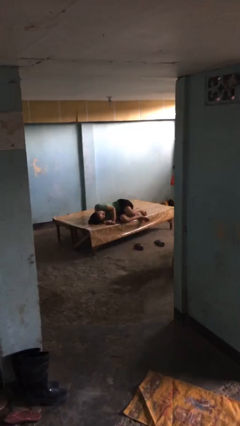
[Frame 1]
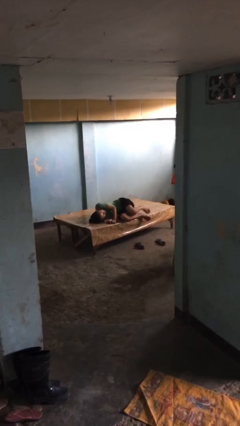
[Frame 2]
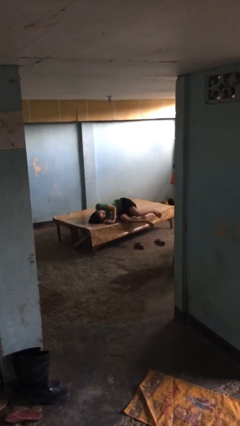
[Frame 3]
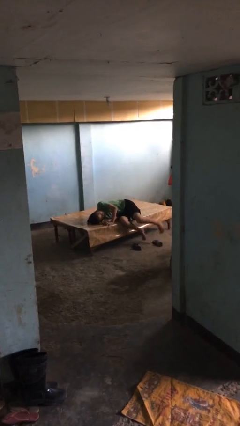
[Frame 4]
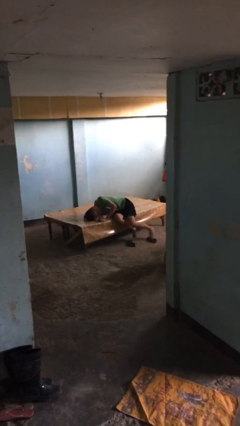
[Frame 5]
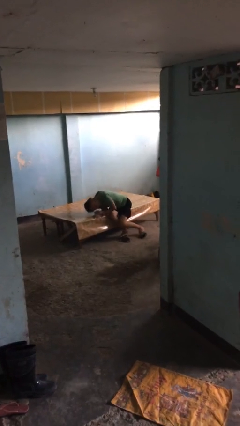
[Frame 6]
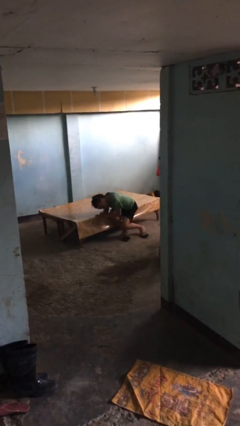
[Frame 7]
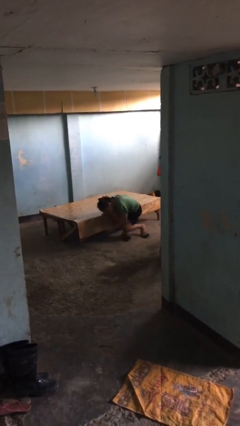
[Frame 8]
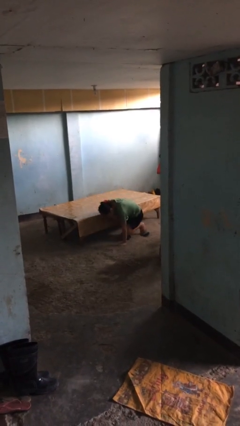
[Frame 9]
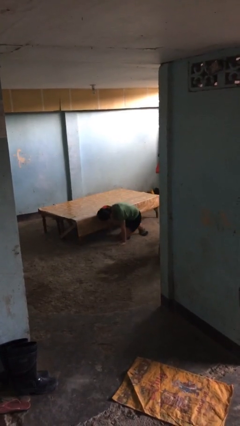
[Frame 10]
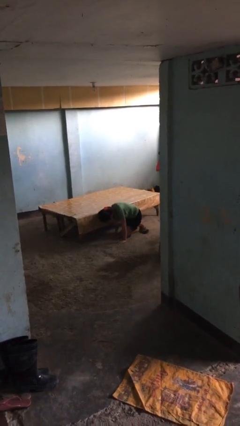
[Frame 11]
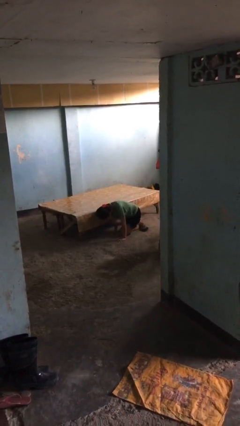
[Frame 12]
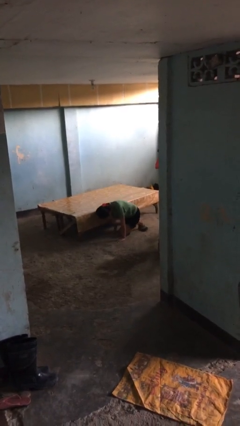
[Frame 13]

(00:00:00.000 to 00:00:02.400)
person falls from bed

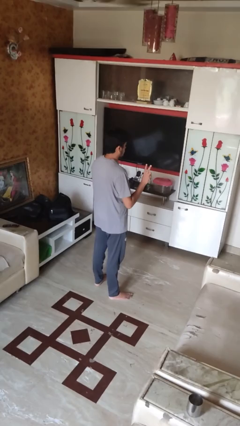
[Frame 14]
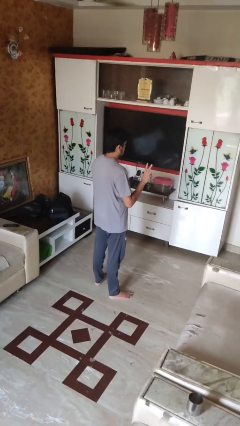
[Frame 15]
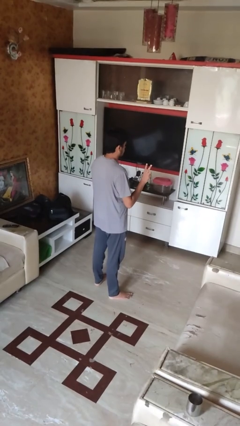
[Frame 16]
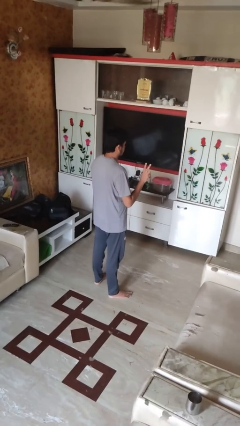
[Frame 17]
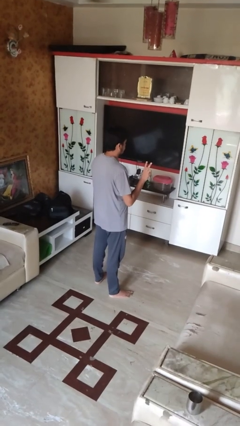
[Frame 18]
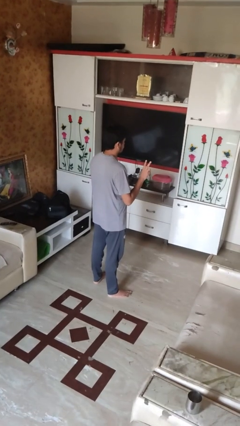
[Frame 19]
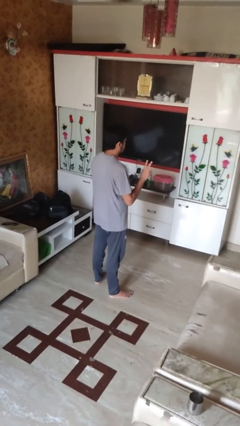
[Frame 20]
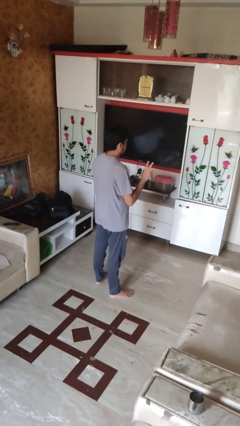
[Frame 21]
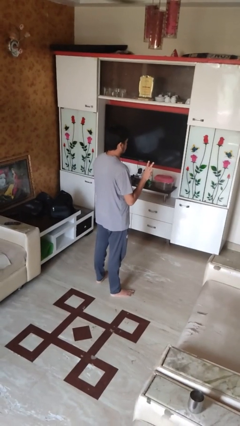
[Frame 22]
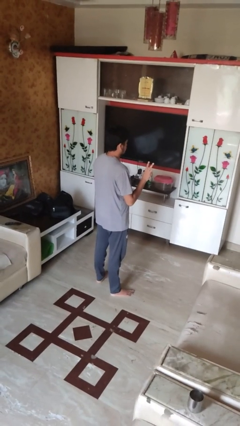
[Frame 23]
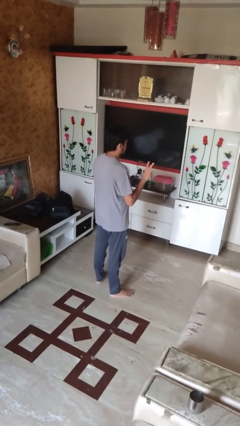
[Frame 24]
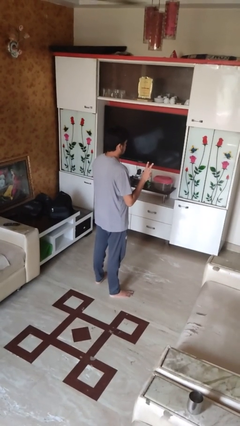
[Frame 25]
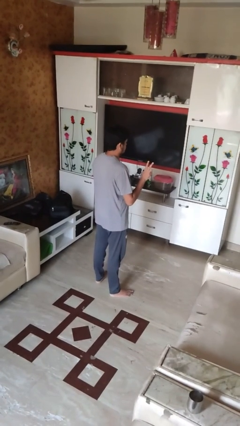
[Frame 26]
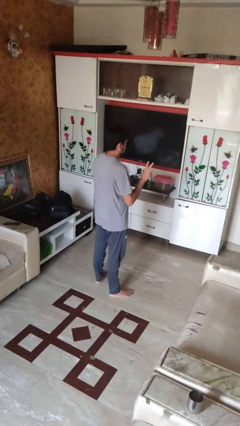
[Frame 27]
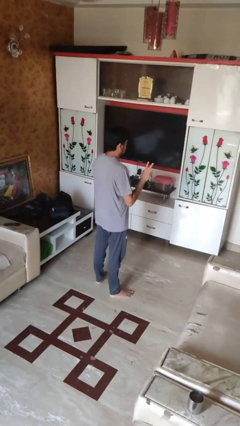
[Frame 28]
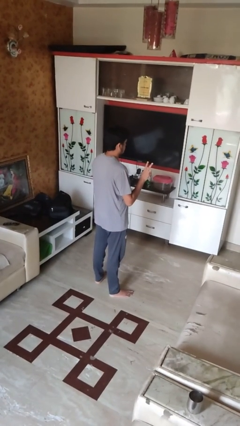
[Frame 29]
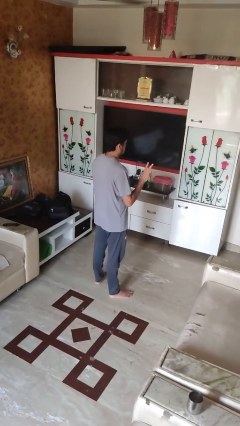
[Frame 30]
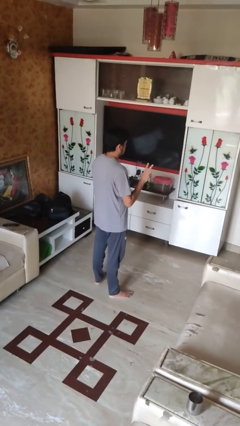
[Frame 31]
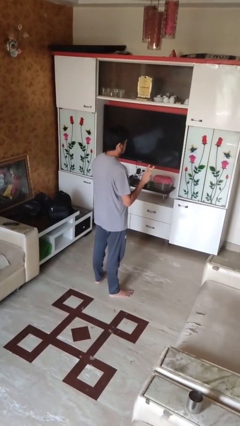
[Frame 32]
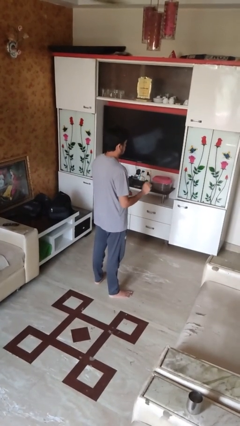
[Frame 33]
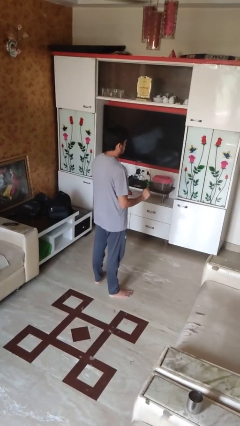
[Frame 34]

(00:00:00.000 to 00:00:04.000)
person gestures peace

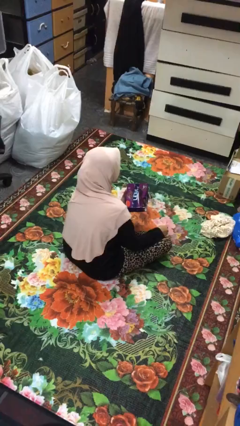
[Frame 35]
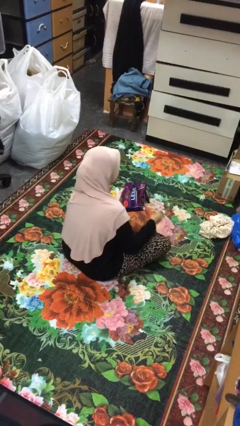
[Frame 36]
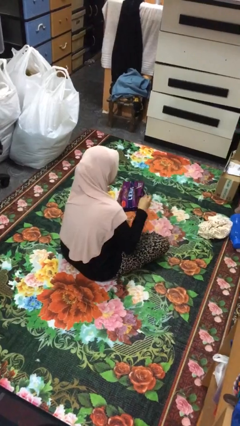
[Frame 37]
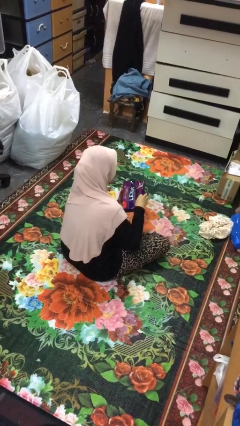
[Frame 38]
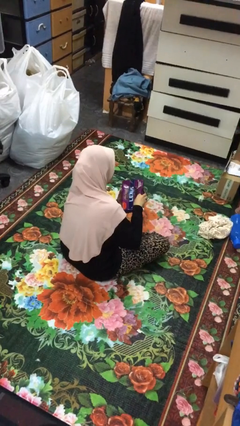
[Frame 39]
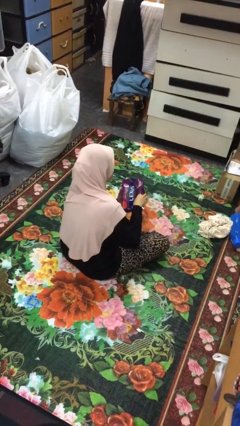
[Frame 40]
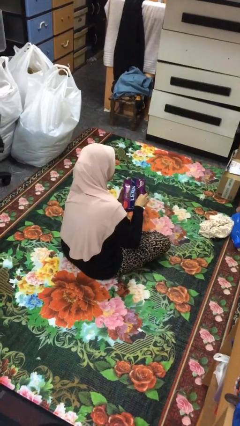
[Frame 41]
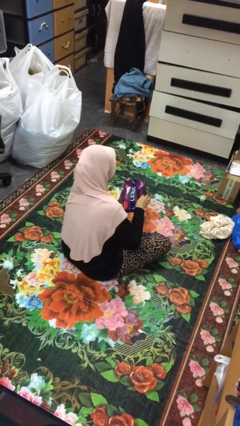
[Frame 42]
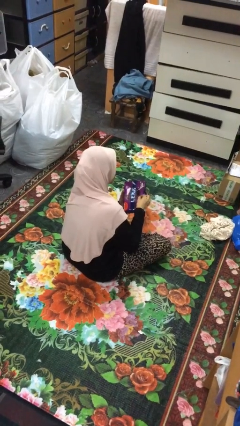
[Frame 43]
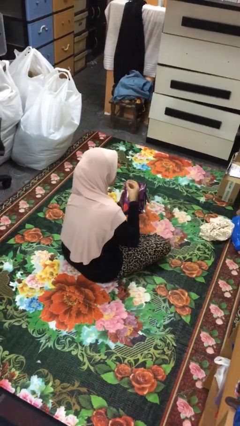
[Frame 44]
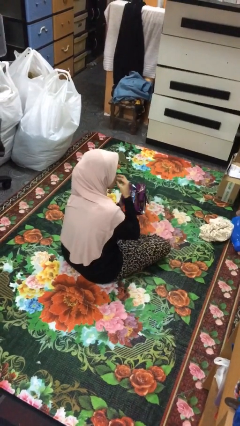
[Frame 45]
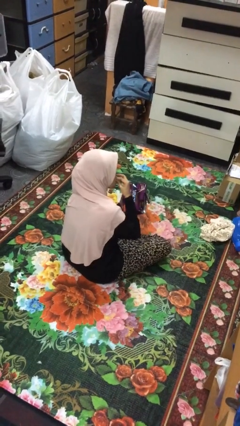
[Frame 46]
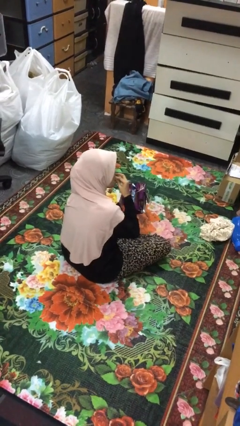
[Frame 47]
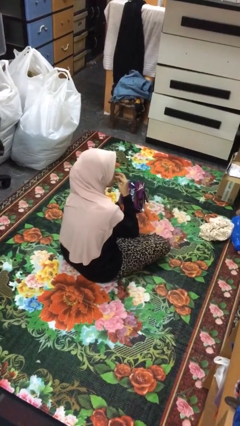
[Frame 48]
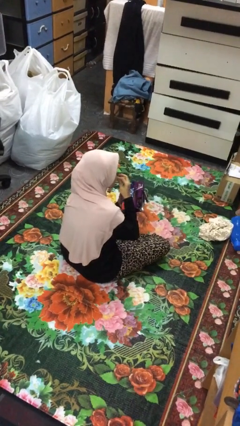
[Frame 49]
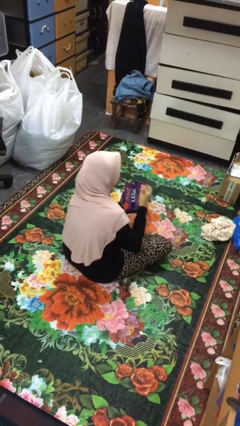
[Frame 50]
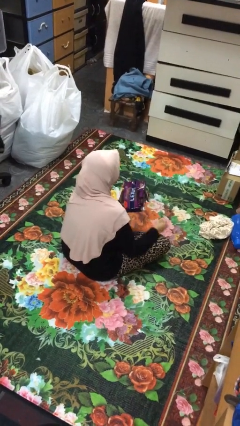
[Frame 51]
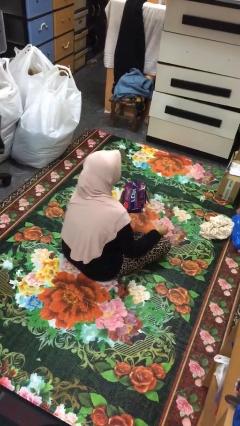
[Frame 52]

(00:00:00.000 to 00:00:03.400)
person eats snack from bag

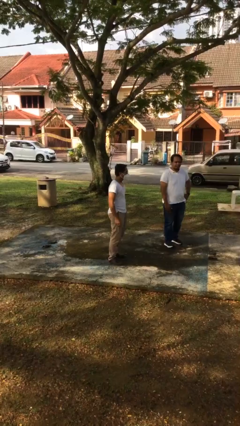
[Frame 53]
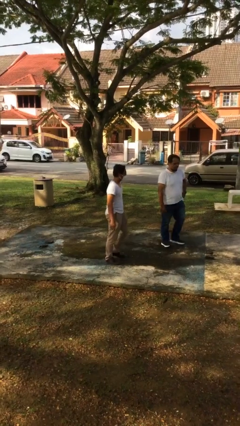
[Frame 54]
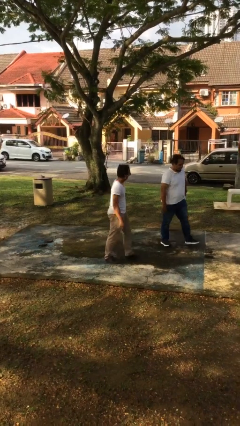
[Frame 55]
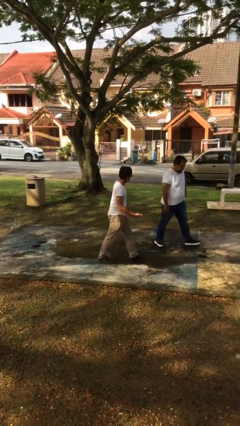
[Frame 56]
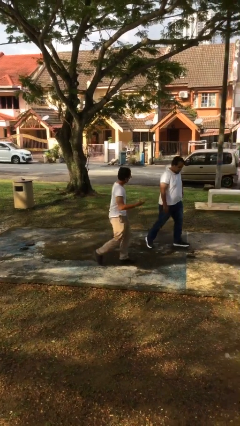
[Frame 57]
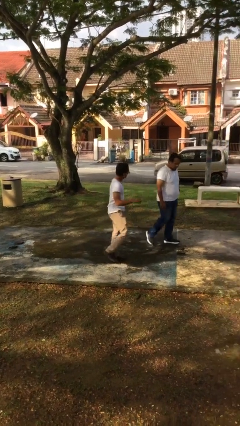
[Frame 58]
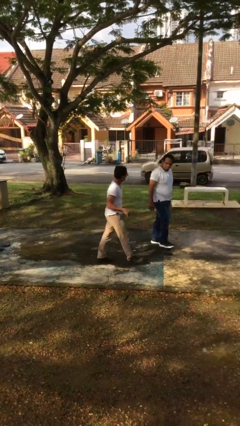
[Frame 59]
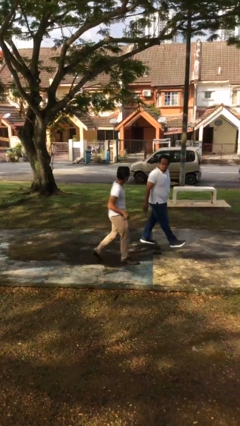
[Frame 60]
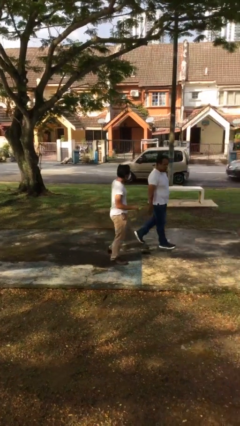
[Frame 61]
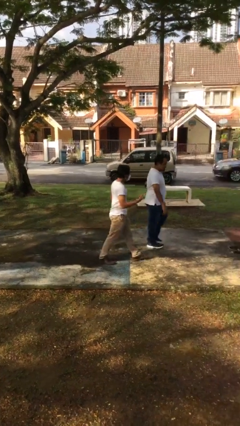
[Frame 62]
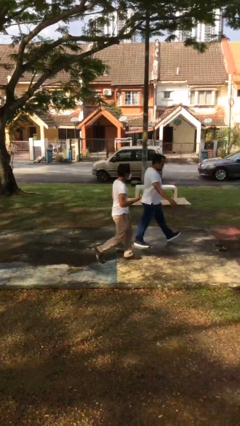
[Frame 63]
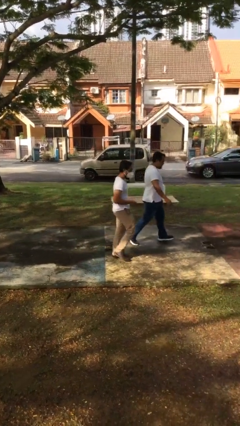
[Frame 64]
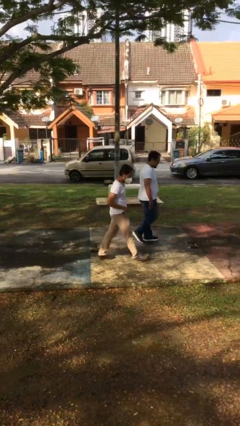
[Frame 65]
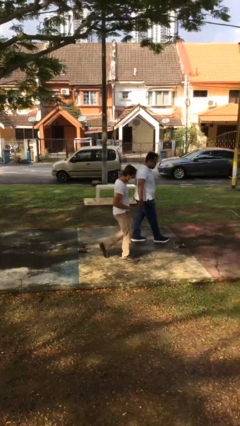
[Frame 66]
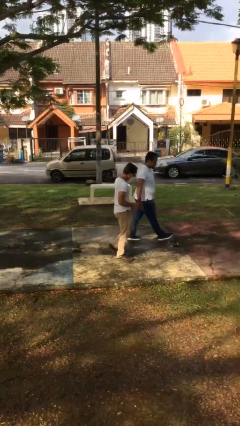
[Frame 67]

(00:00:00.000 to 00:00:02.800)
person talks to person

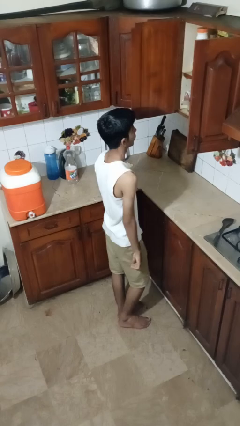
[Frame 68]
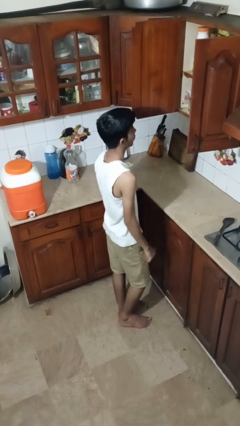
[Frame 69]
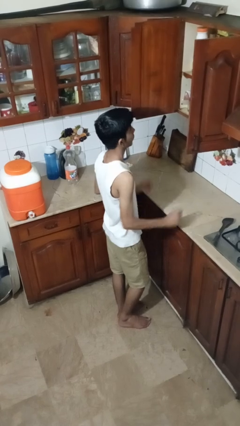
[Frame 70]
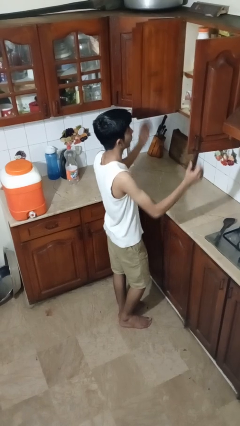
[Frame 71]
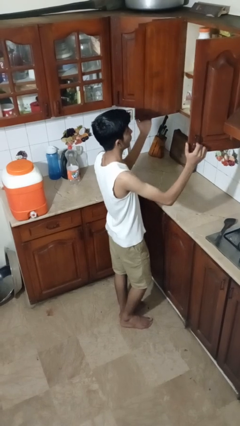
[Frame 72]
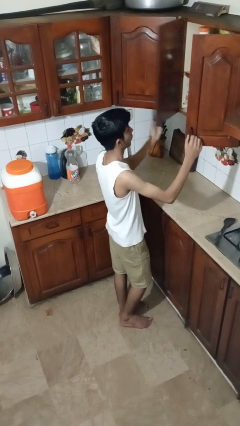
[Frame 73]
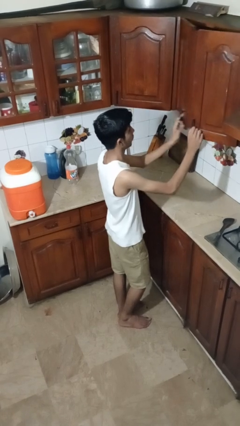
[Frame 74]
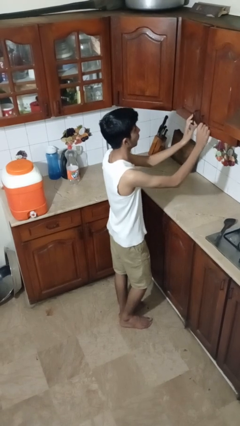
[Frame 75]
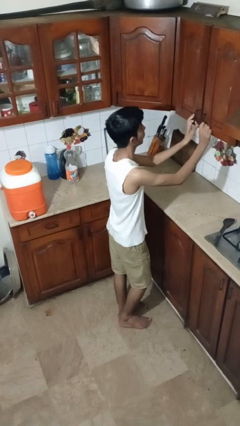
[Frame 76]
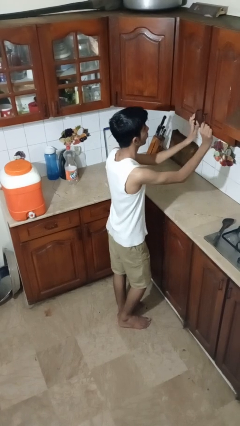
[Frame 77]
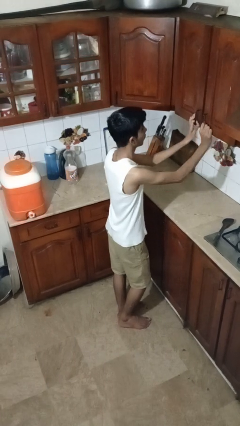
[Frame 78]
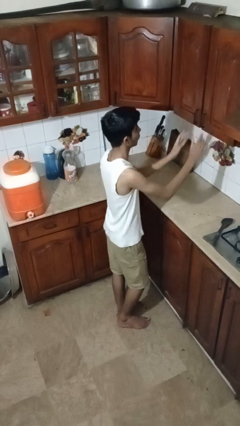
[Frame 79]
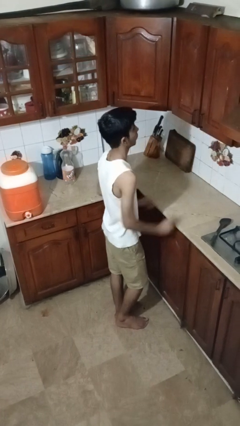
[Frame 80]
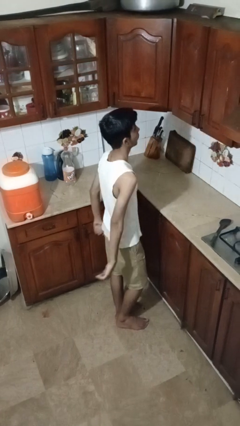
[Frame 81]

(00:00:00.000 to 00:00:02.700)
person closes cabinet

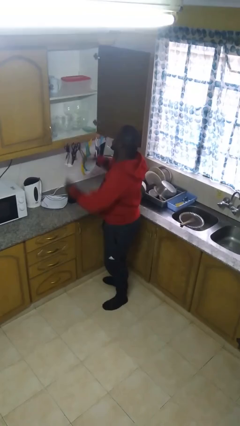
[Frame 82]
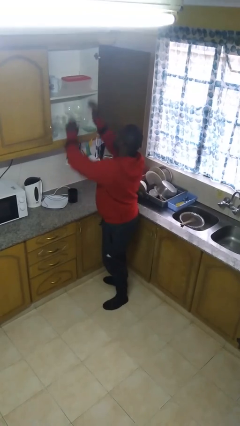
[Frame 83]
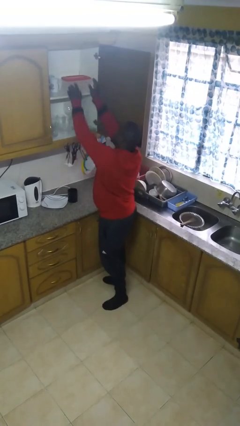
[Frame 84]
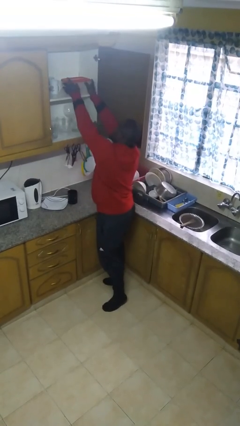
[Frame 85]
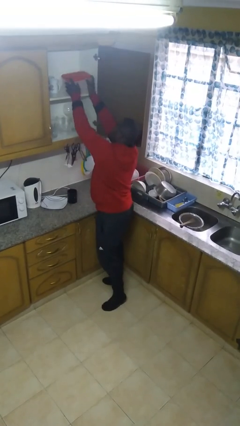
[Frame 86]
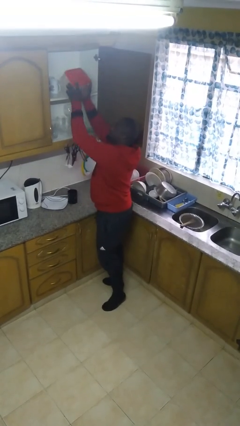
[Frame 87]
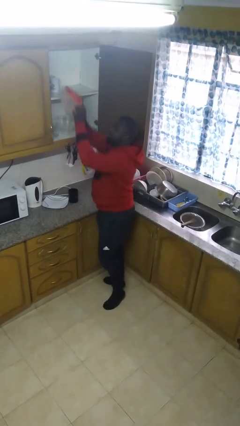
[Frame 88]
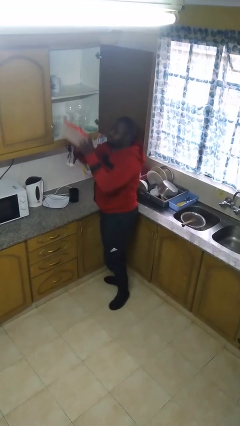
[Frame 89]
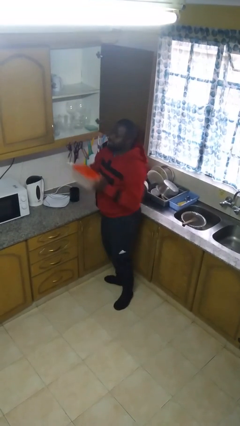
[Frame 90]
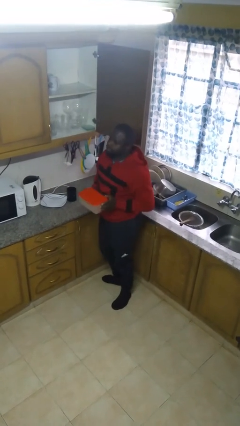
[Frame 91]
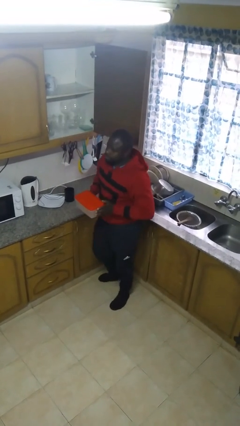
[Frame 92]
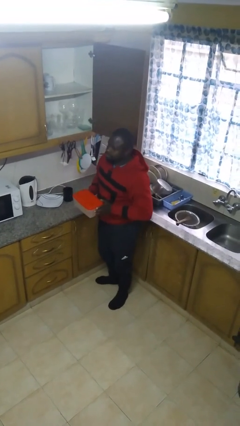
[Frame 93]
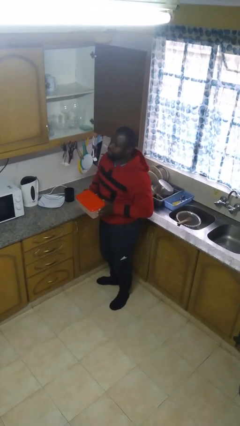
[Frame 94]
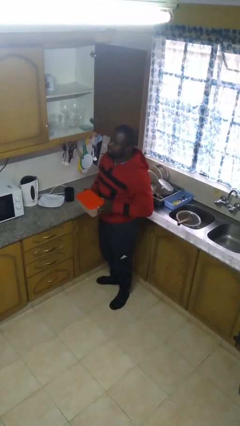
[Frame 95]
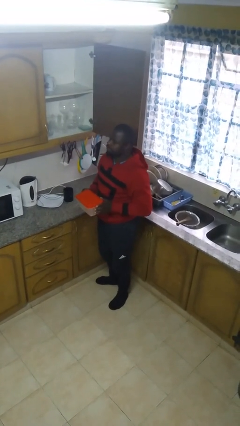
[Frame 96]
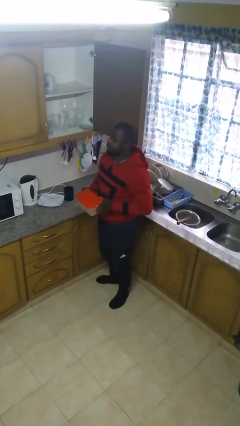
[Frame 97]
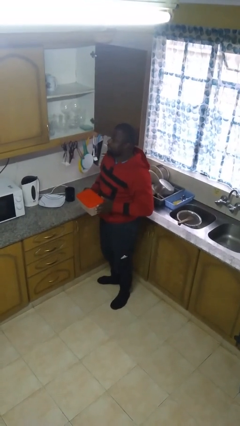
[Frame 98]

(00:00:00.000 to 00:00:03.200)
person picks up object from cabinet
